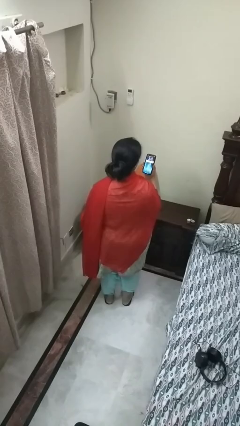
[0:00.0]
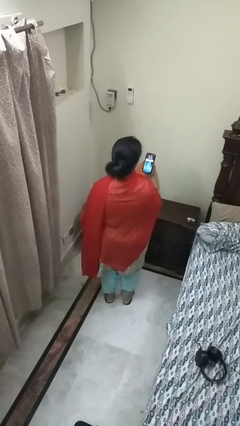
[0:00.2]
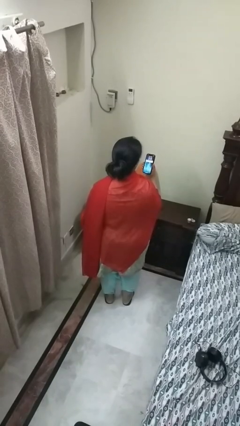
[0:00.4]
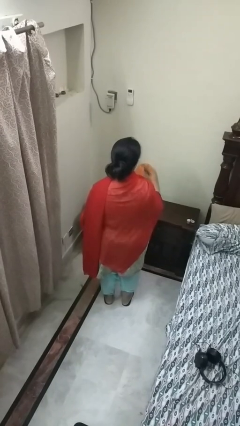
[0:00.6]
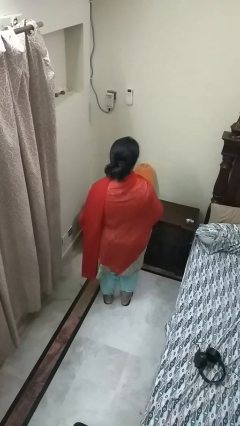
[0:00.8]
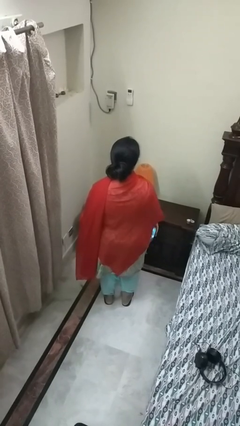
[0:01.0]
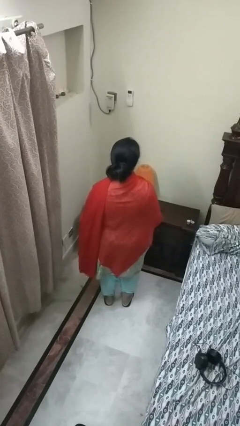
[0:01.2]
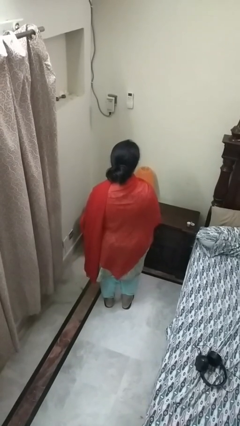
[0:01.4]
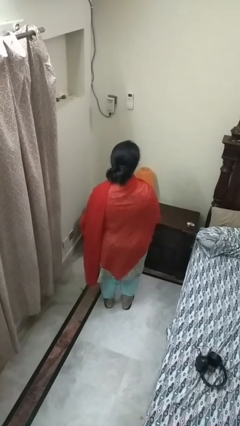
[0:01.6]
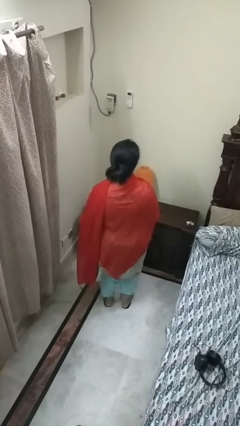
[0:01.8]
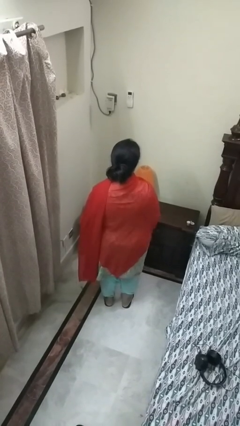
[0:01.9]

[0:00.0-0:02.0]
person puts phone into pocket

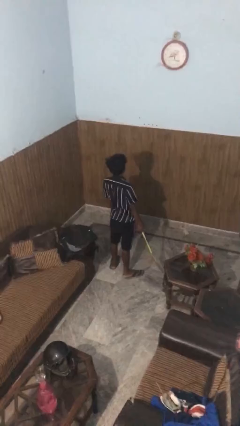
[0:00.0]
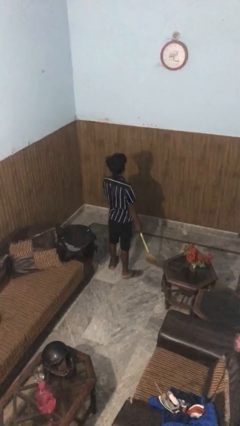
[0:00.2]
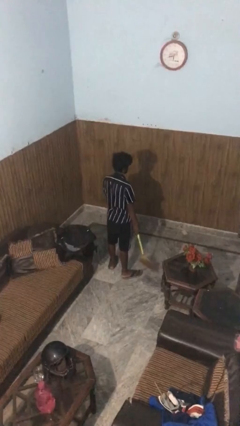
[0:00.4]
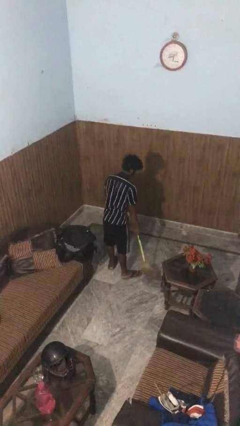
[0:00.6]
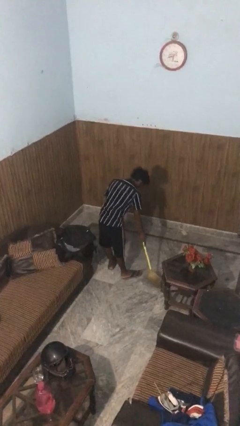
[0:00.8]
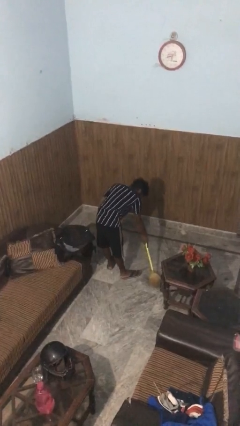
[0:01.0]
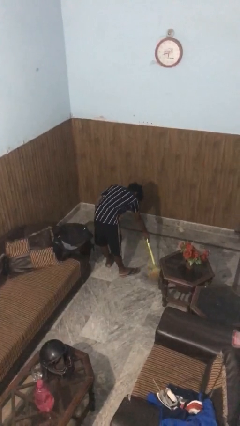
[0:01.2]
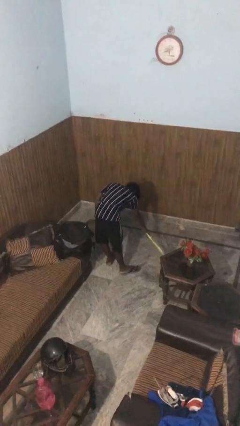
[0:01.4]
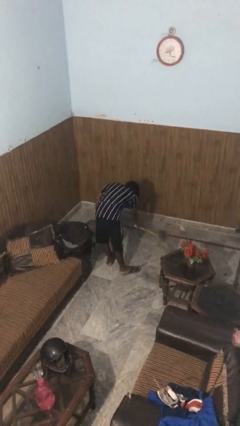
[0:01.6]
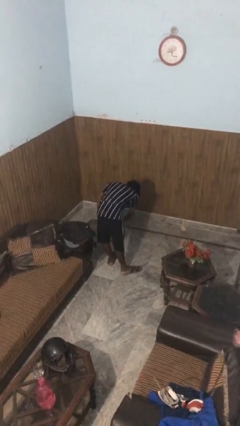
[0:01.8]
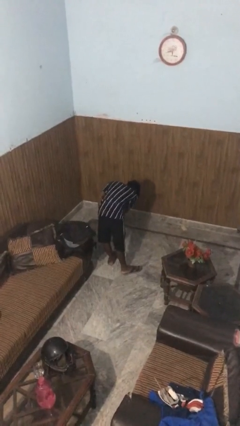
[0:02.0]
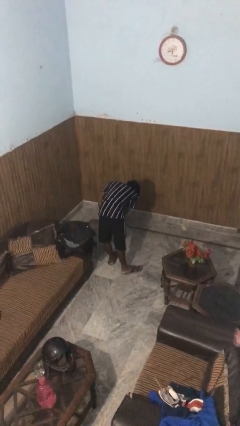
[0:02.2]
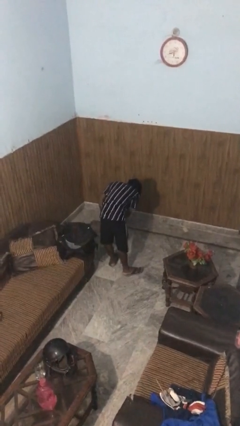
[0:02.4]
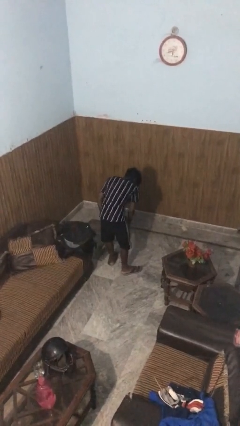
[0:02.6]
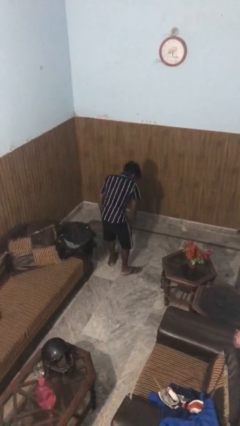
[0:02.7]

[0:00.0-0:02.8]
person sweeps floor

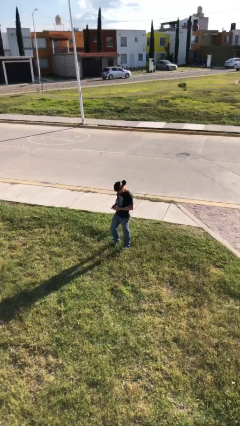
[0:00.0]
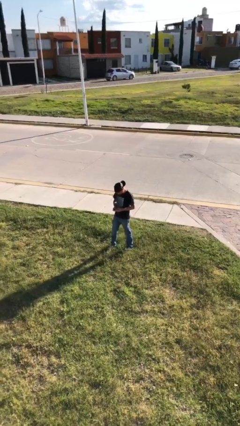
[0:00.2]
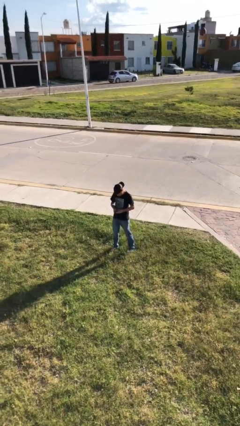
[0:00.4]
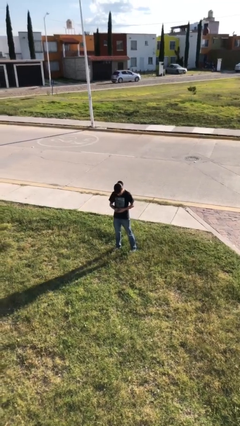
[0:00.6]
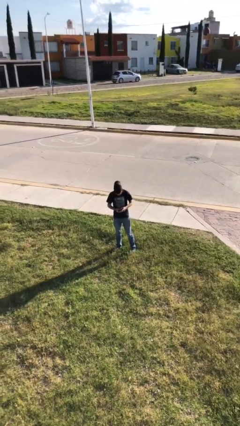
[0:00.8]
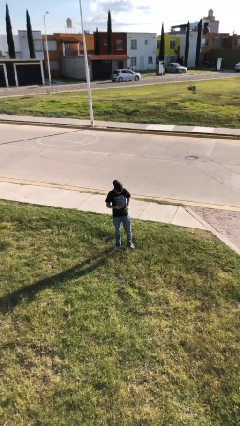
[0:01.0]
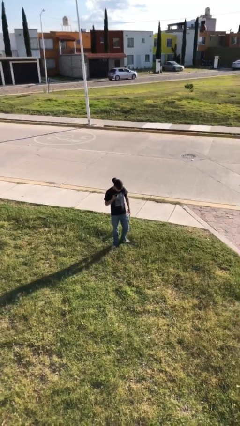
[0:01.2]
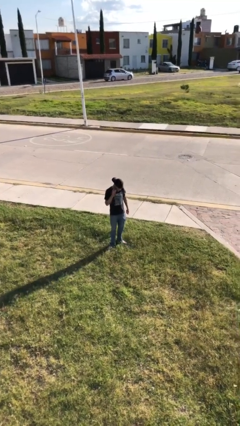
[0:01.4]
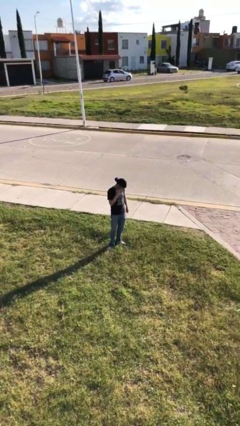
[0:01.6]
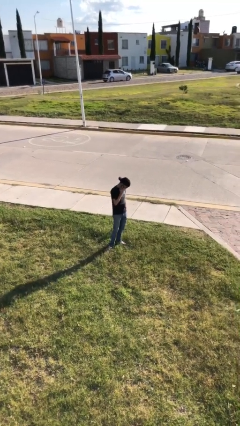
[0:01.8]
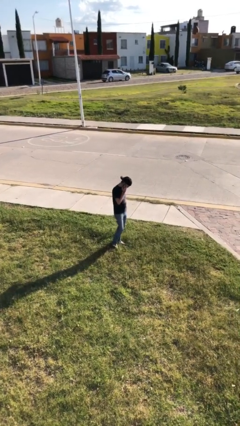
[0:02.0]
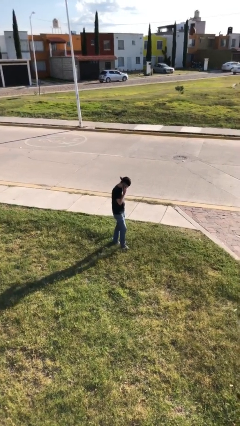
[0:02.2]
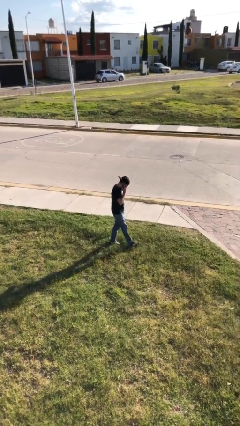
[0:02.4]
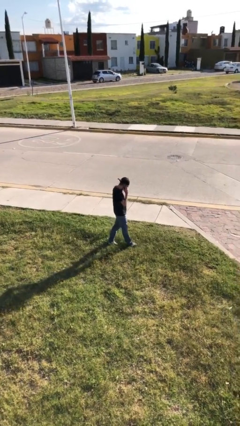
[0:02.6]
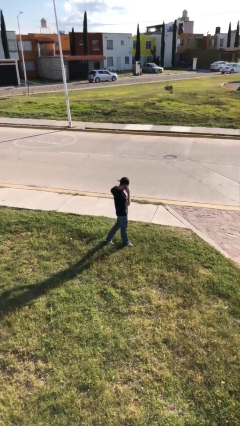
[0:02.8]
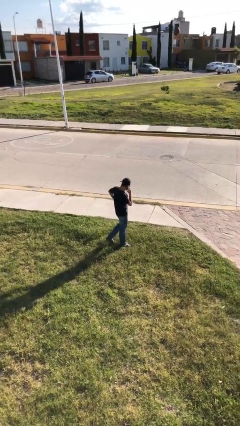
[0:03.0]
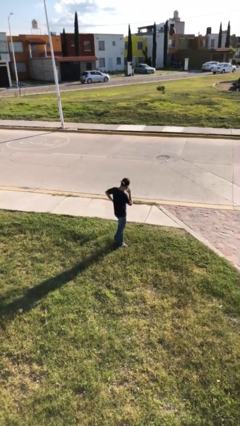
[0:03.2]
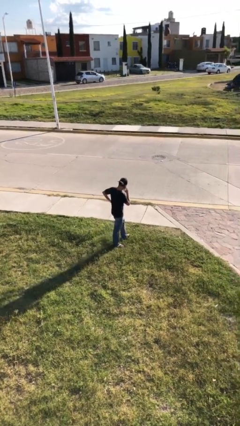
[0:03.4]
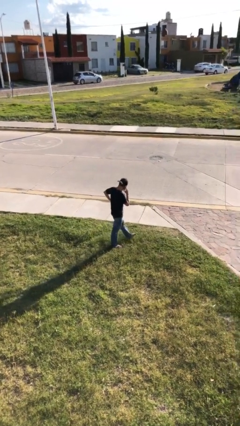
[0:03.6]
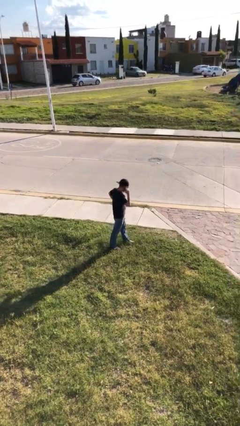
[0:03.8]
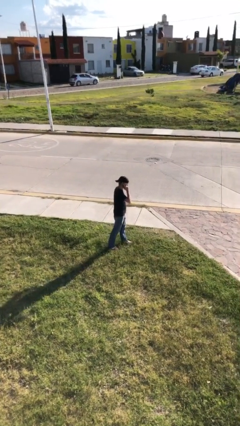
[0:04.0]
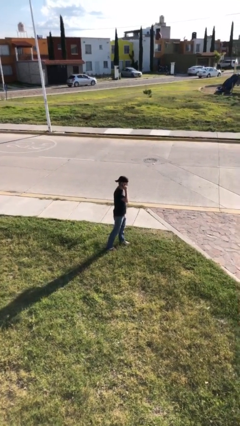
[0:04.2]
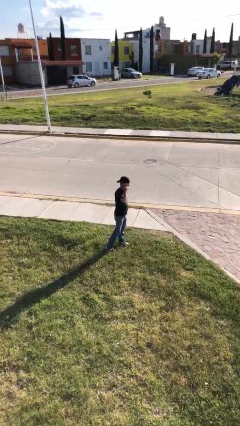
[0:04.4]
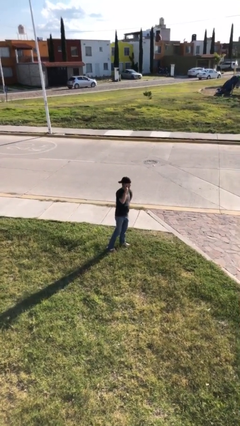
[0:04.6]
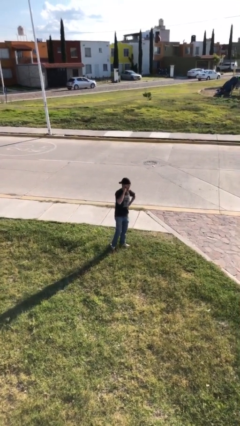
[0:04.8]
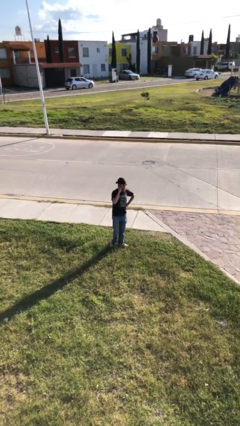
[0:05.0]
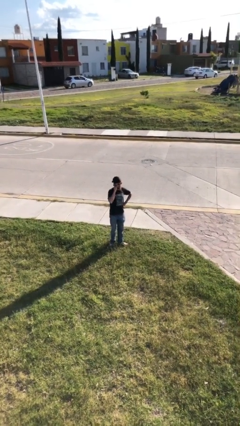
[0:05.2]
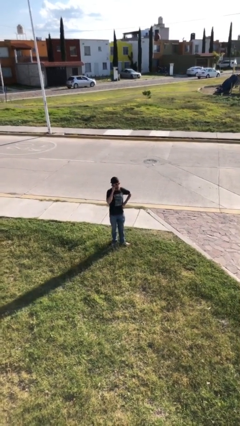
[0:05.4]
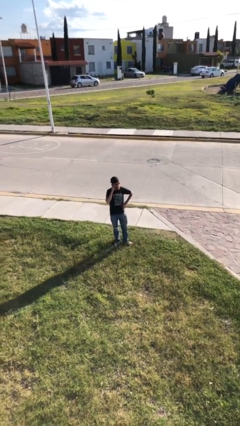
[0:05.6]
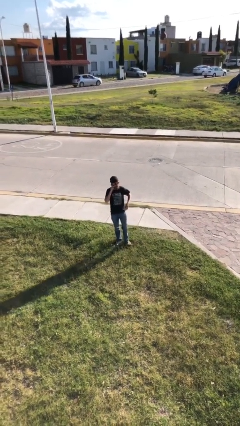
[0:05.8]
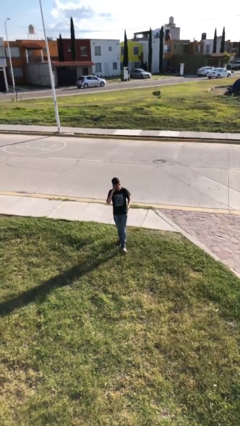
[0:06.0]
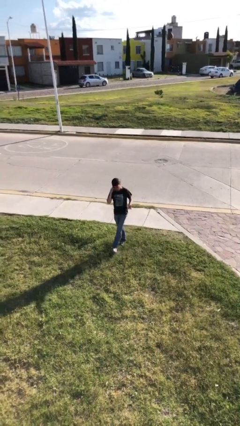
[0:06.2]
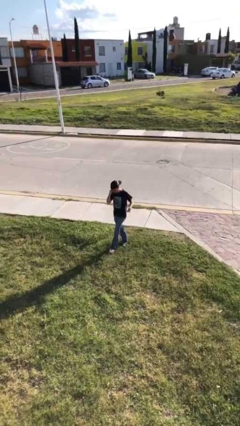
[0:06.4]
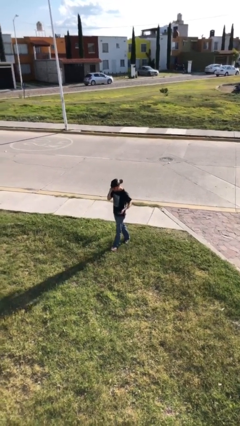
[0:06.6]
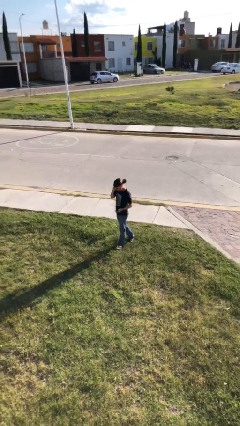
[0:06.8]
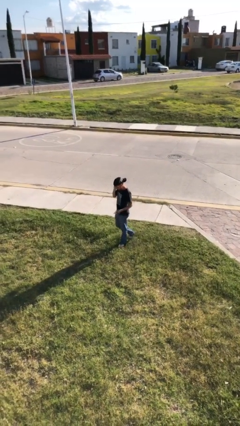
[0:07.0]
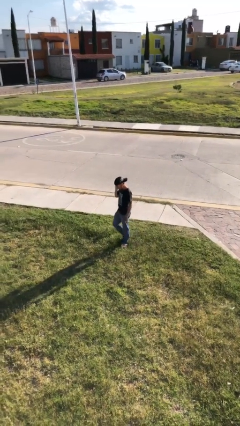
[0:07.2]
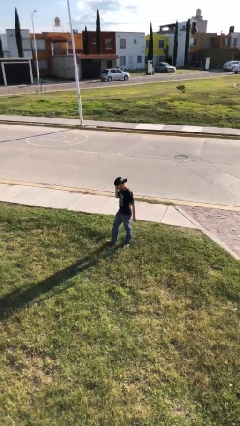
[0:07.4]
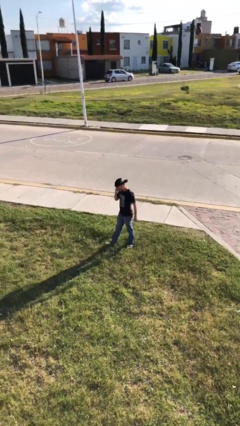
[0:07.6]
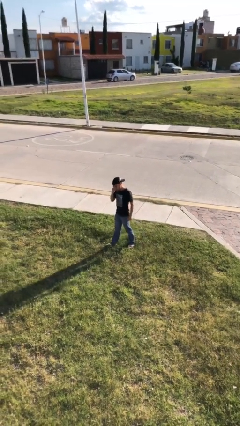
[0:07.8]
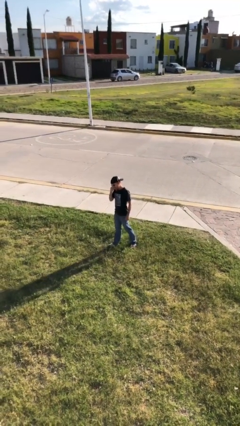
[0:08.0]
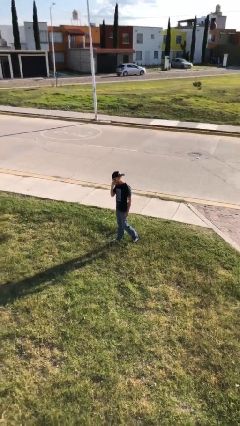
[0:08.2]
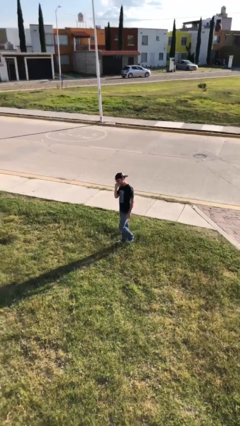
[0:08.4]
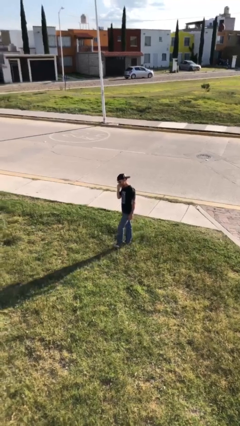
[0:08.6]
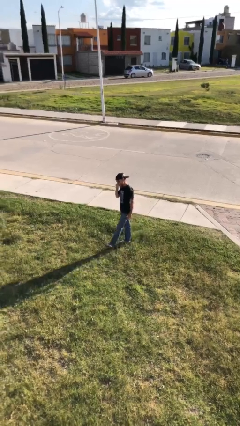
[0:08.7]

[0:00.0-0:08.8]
person talks on phone

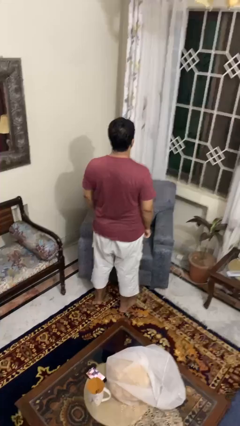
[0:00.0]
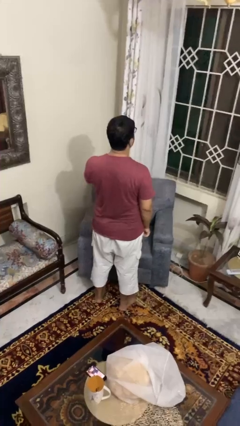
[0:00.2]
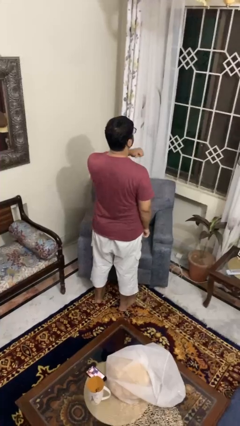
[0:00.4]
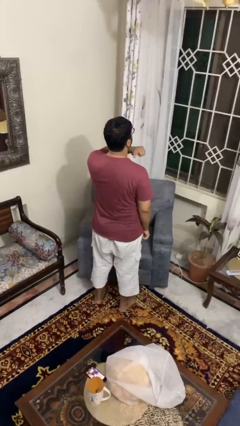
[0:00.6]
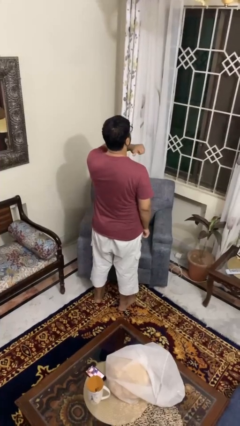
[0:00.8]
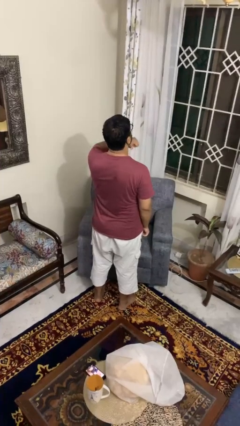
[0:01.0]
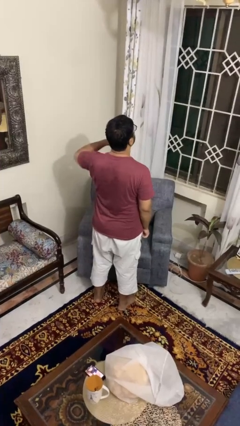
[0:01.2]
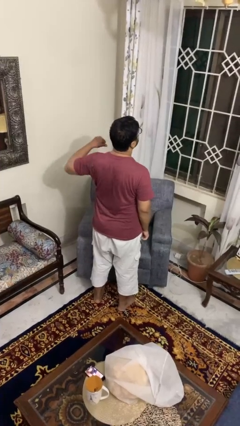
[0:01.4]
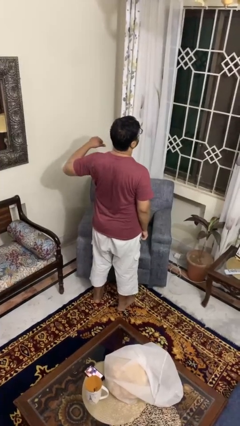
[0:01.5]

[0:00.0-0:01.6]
person gestures cut

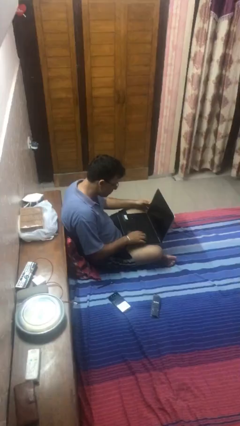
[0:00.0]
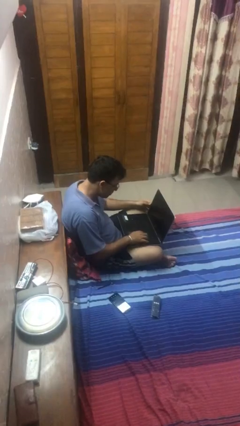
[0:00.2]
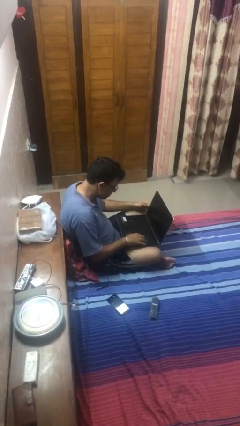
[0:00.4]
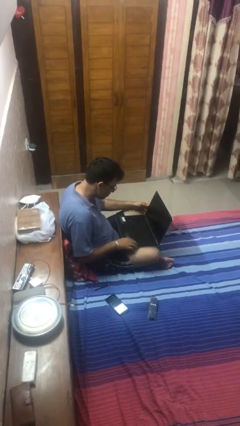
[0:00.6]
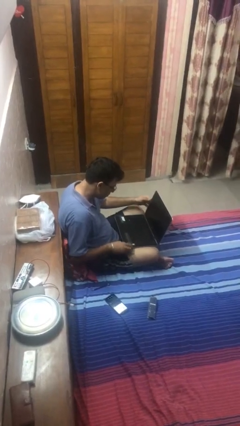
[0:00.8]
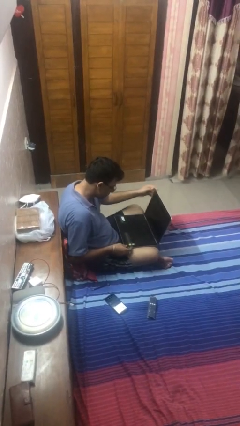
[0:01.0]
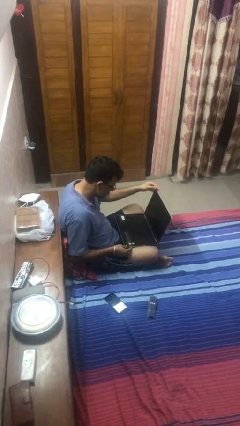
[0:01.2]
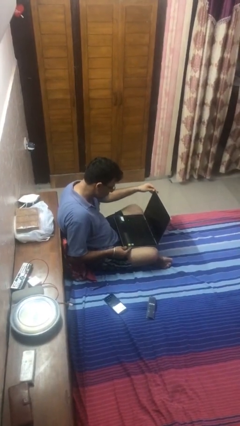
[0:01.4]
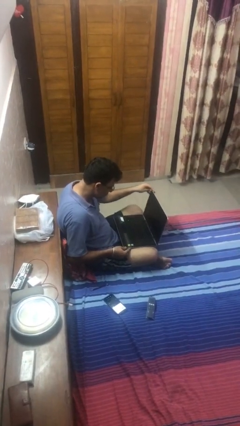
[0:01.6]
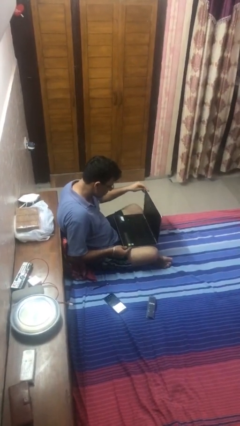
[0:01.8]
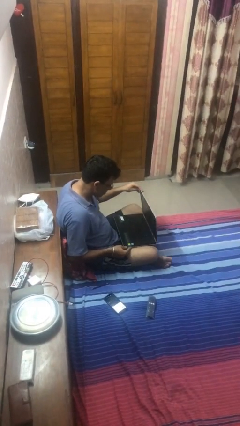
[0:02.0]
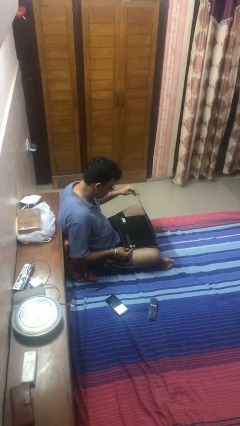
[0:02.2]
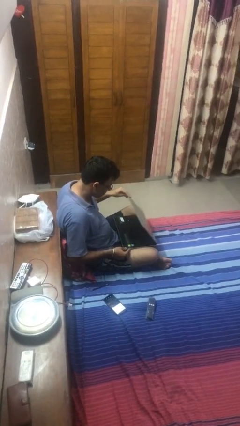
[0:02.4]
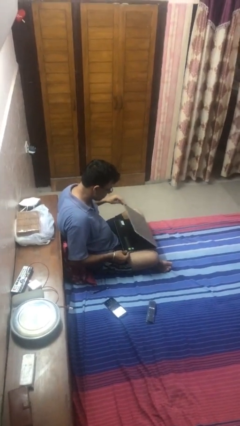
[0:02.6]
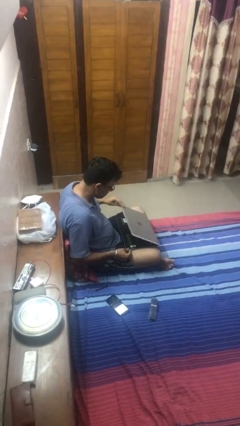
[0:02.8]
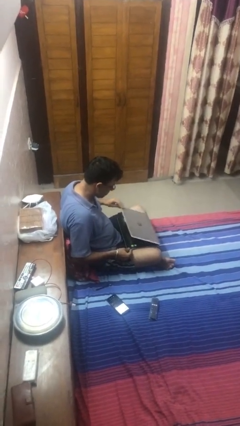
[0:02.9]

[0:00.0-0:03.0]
person closes laptop
